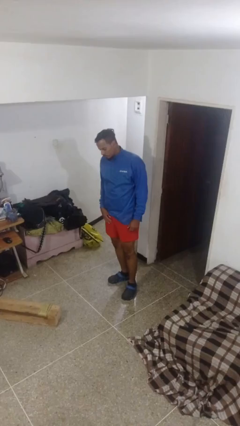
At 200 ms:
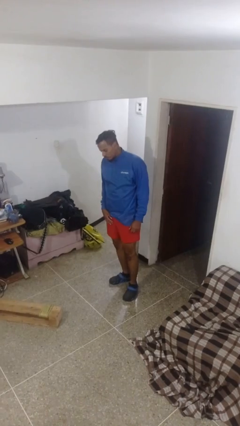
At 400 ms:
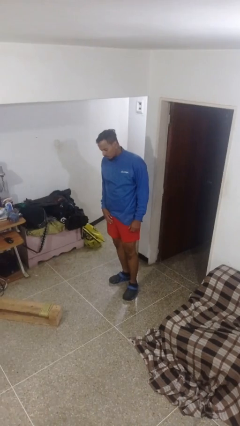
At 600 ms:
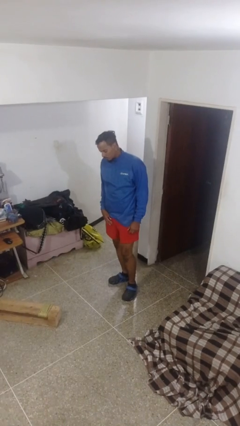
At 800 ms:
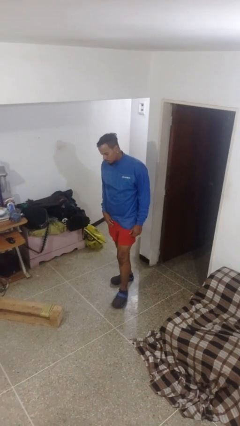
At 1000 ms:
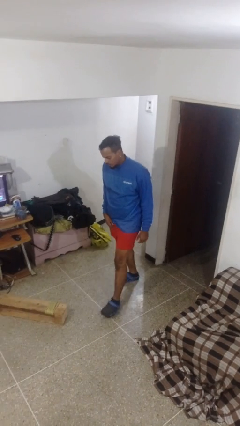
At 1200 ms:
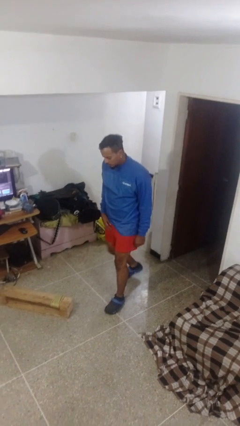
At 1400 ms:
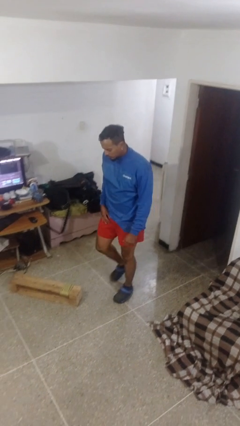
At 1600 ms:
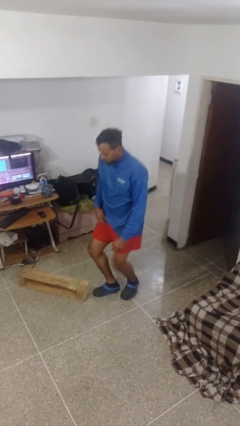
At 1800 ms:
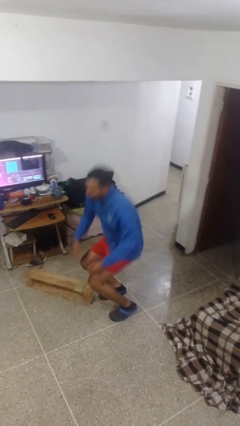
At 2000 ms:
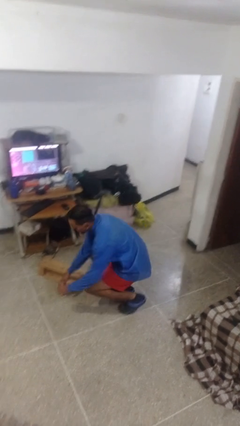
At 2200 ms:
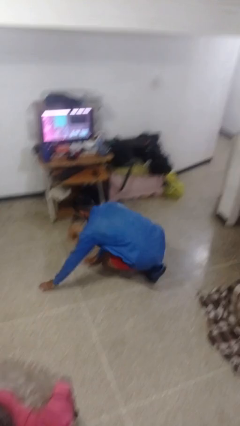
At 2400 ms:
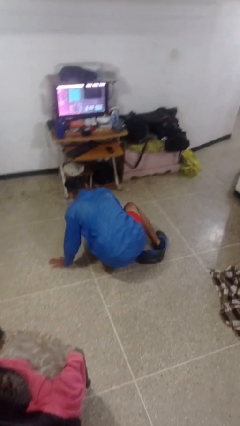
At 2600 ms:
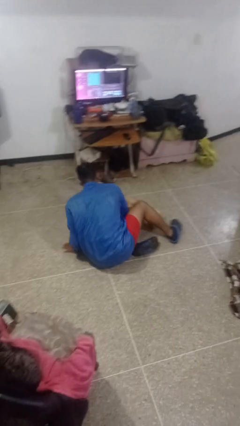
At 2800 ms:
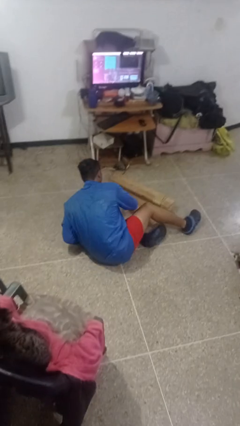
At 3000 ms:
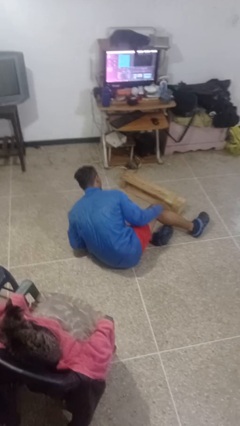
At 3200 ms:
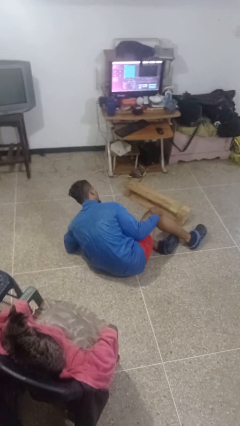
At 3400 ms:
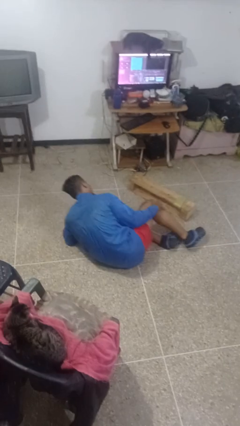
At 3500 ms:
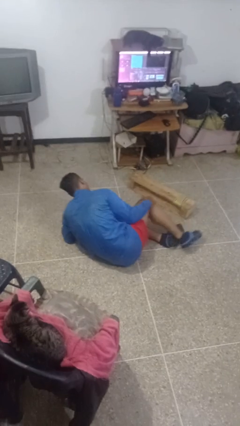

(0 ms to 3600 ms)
person trips on object on floor

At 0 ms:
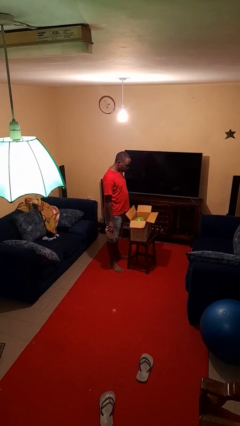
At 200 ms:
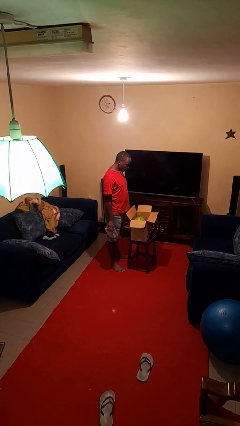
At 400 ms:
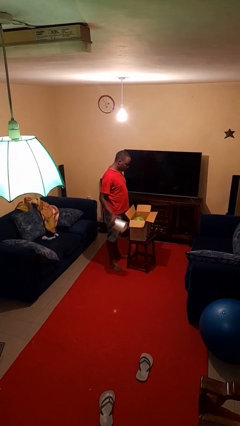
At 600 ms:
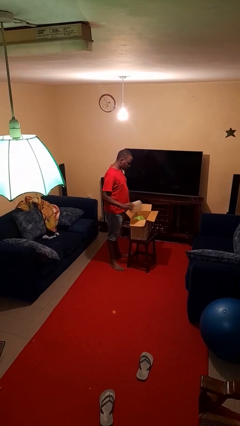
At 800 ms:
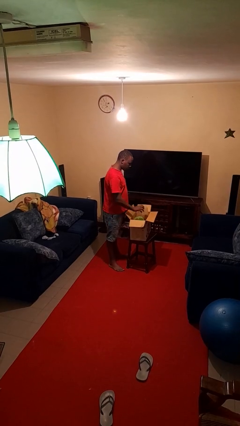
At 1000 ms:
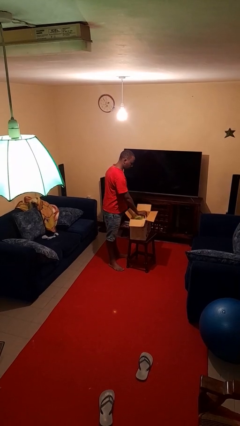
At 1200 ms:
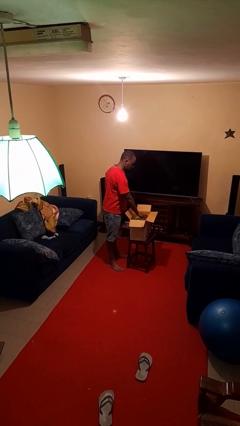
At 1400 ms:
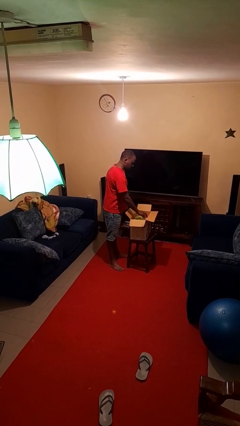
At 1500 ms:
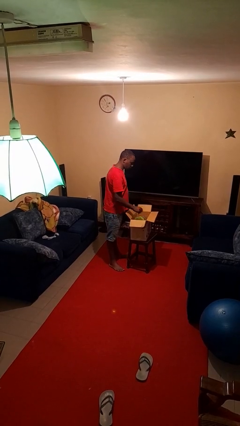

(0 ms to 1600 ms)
person puts object into box

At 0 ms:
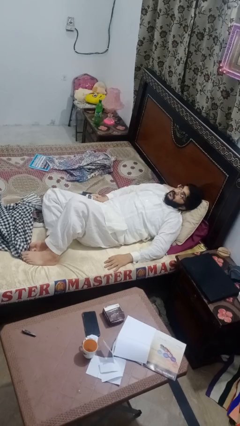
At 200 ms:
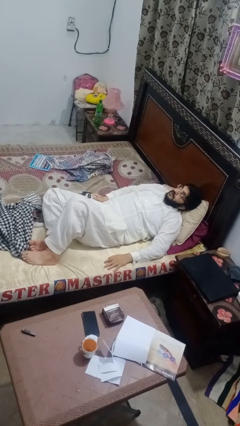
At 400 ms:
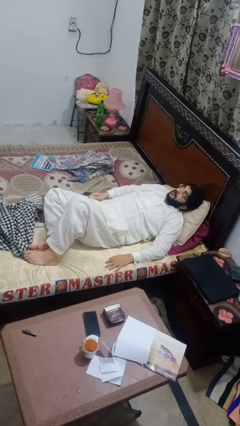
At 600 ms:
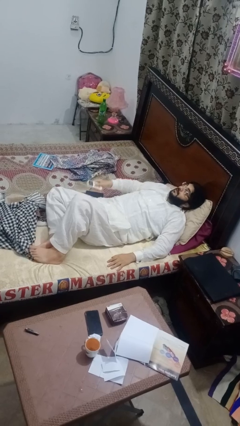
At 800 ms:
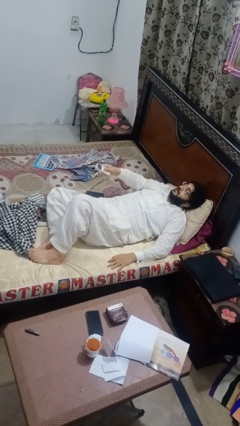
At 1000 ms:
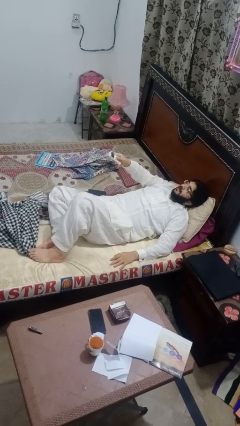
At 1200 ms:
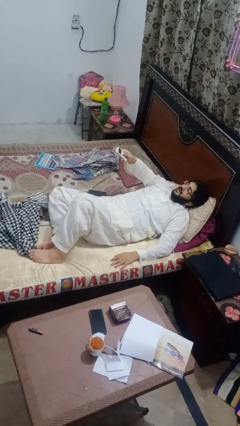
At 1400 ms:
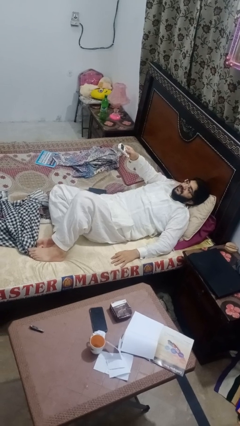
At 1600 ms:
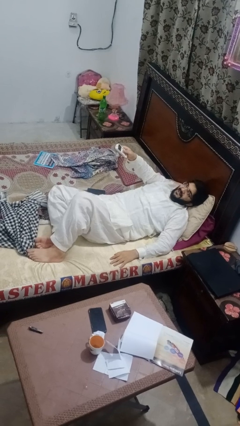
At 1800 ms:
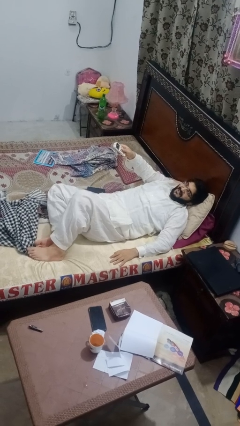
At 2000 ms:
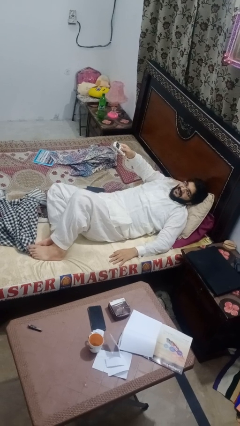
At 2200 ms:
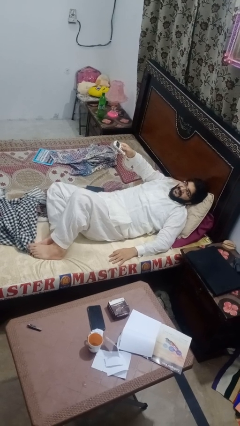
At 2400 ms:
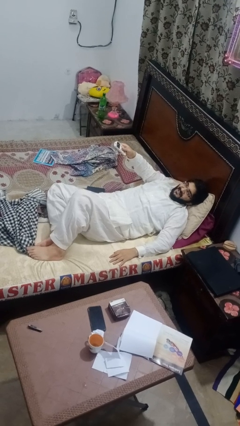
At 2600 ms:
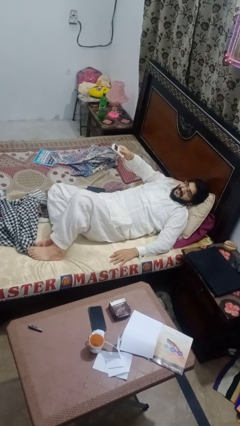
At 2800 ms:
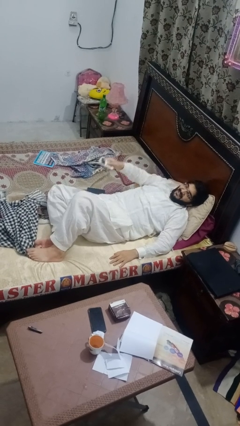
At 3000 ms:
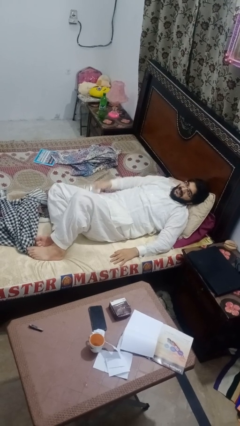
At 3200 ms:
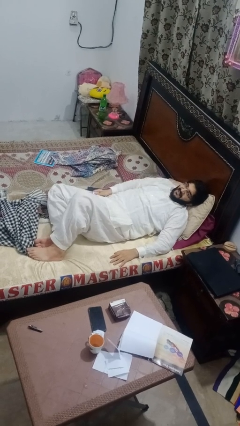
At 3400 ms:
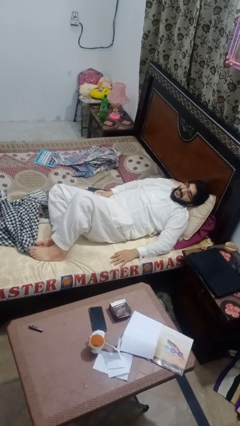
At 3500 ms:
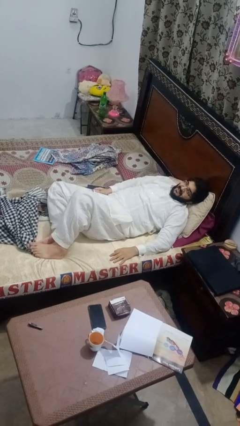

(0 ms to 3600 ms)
person uses television remote

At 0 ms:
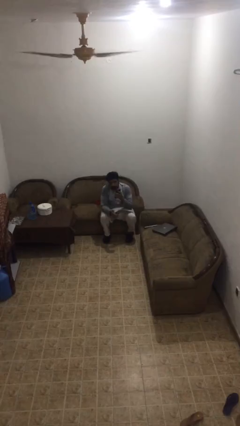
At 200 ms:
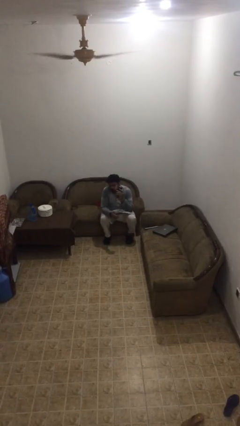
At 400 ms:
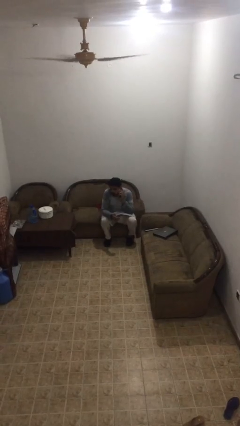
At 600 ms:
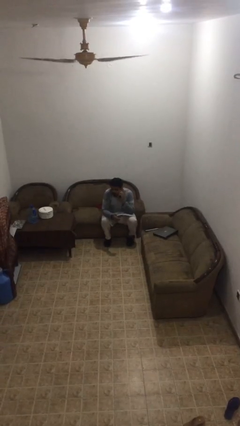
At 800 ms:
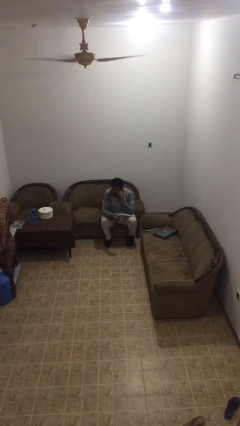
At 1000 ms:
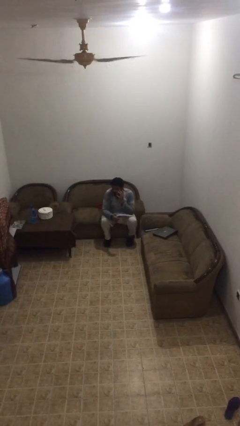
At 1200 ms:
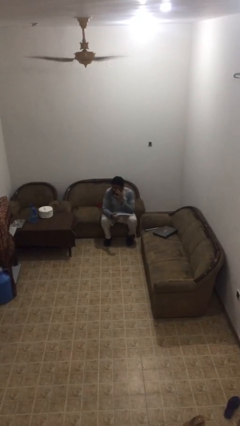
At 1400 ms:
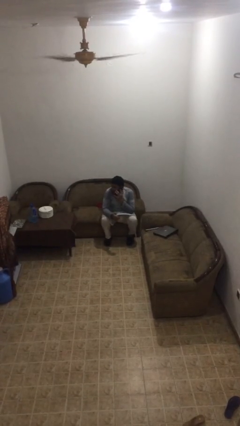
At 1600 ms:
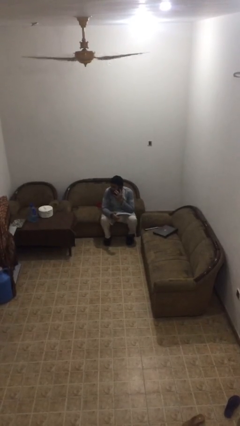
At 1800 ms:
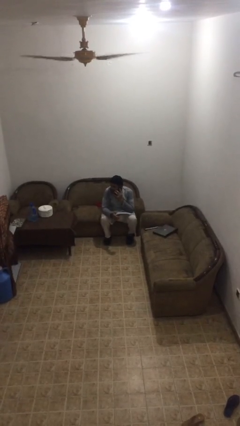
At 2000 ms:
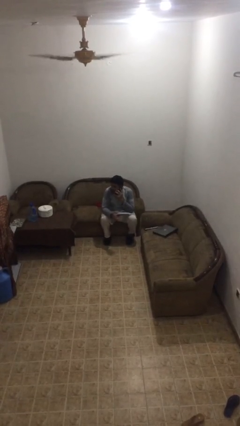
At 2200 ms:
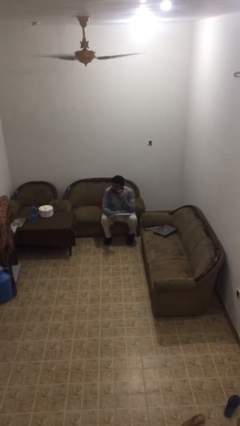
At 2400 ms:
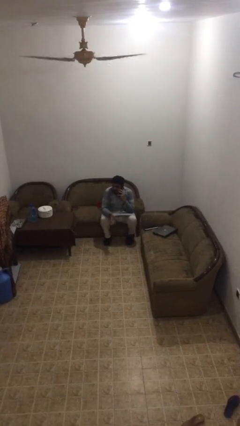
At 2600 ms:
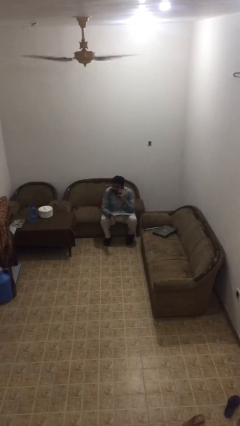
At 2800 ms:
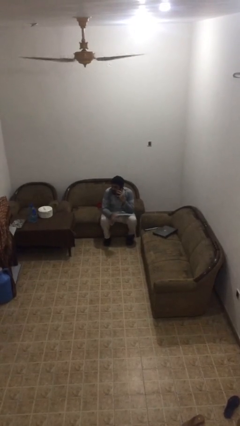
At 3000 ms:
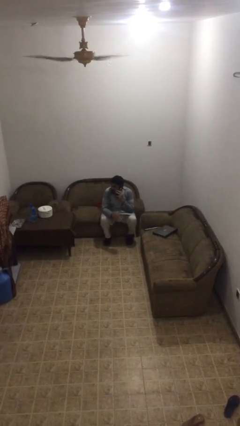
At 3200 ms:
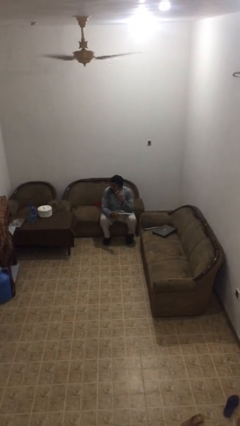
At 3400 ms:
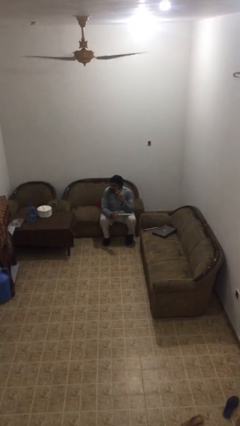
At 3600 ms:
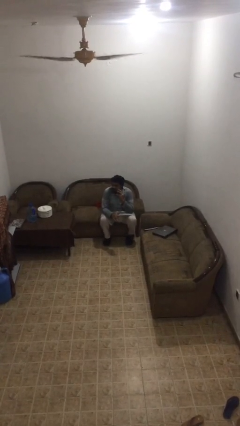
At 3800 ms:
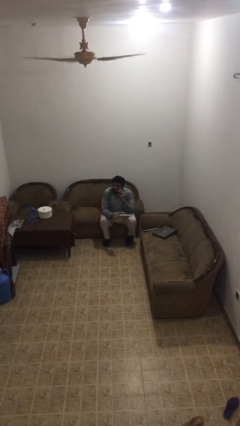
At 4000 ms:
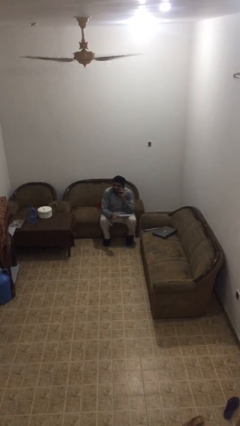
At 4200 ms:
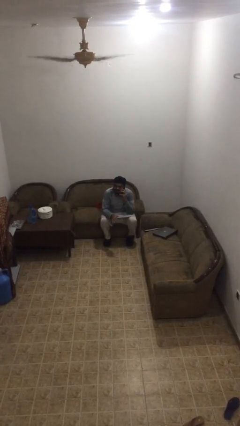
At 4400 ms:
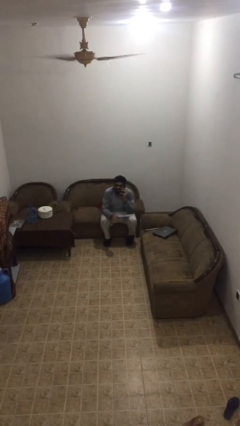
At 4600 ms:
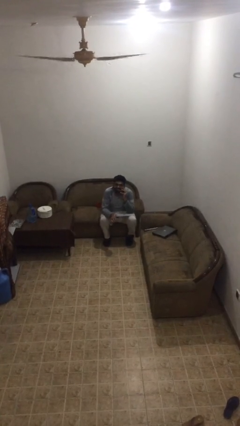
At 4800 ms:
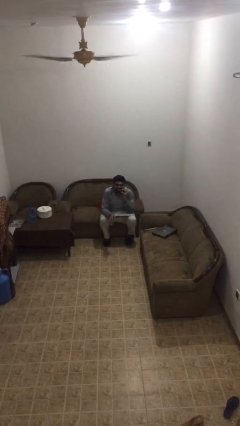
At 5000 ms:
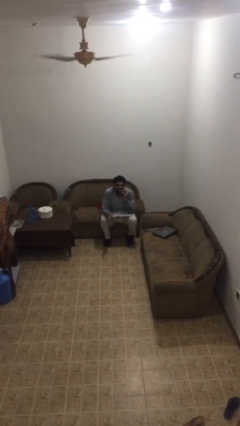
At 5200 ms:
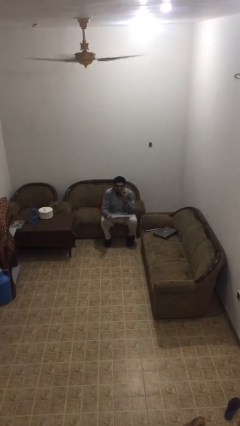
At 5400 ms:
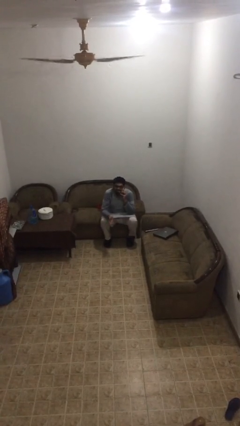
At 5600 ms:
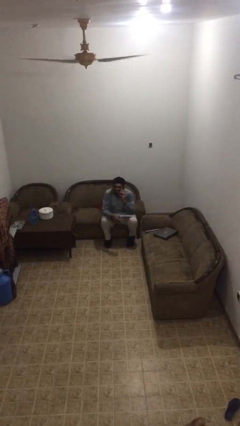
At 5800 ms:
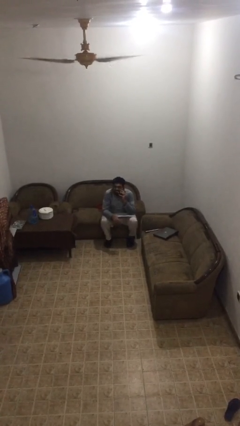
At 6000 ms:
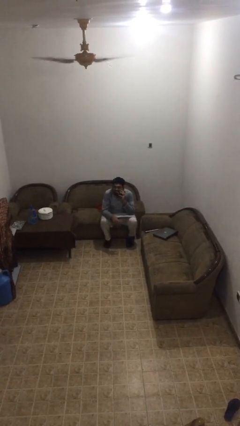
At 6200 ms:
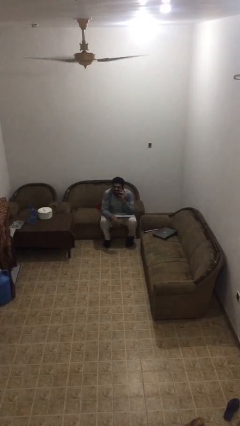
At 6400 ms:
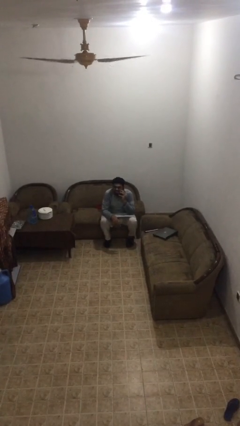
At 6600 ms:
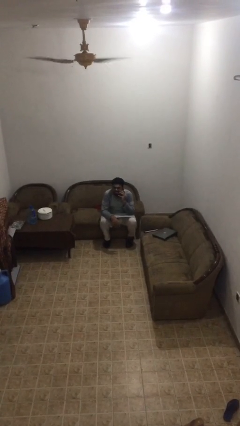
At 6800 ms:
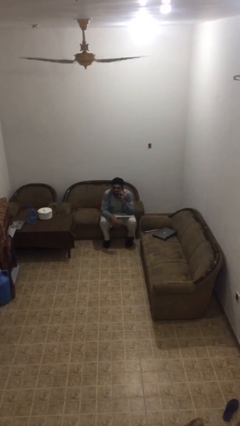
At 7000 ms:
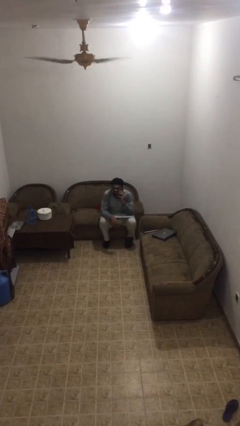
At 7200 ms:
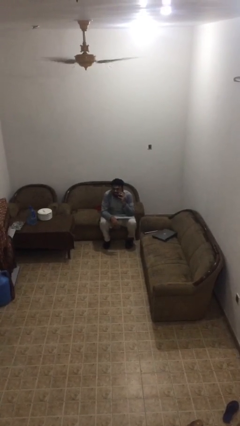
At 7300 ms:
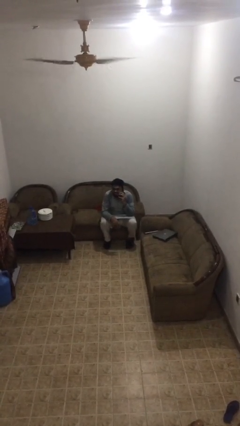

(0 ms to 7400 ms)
person talks on phone

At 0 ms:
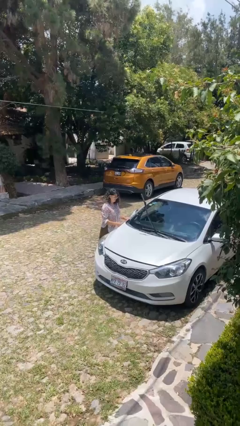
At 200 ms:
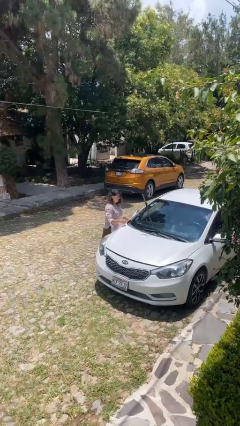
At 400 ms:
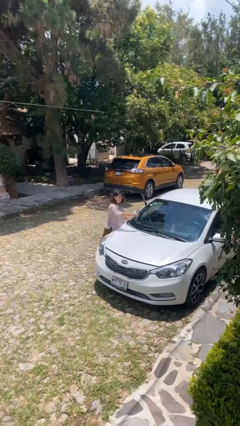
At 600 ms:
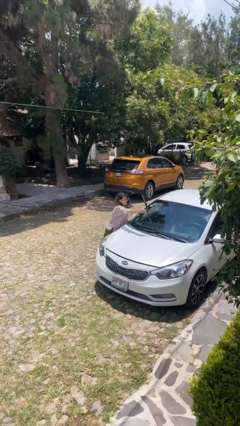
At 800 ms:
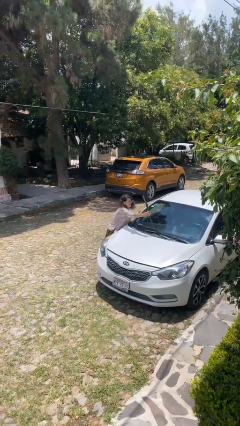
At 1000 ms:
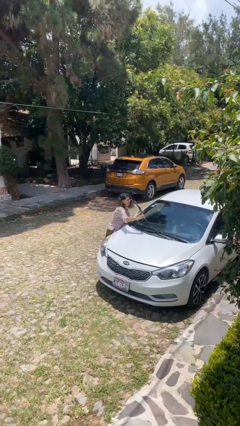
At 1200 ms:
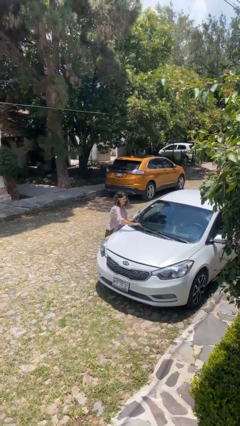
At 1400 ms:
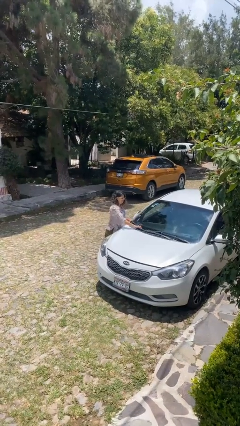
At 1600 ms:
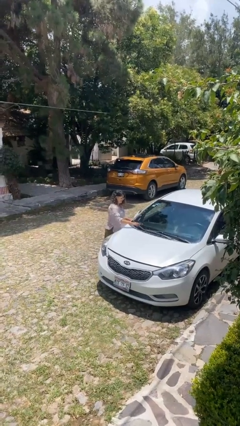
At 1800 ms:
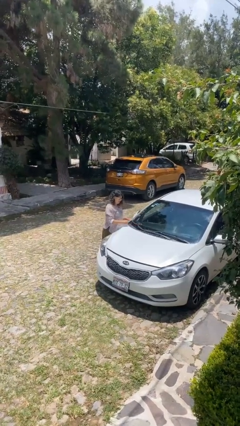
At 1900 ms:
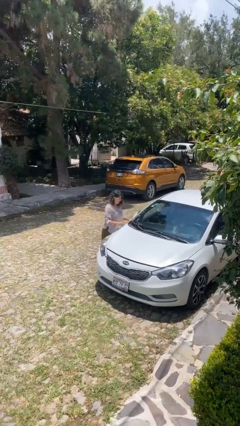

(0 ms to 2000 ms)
person flips down car wipers
